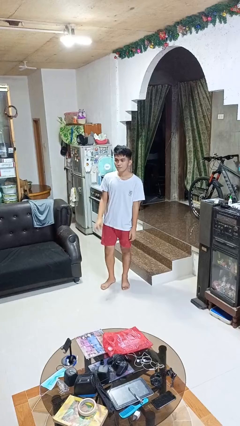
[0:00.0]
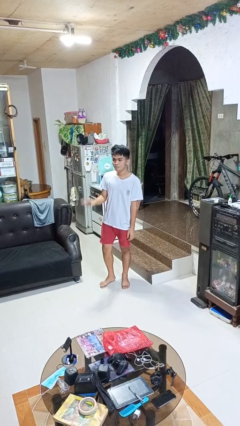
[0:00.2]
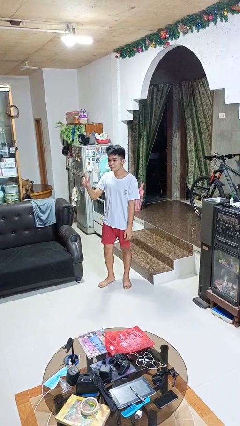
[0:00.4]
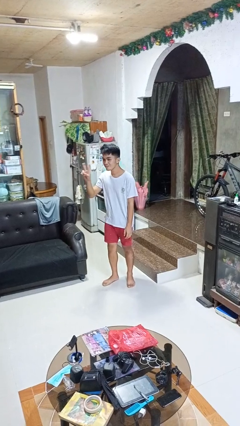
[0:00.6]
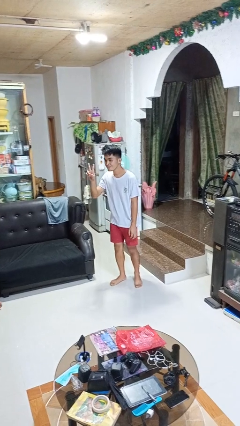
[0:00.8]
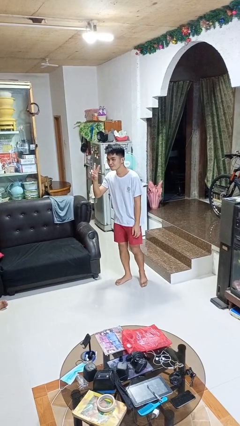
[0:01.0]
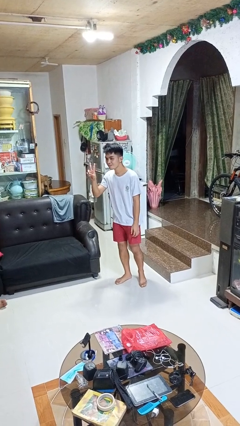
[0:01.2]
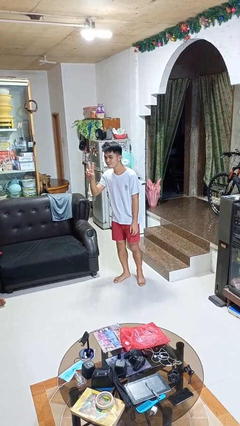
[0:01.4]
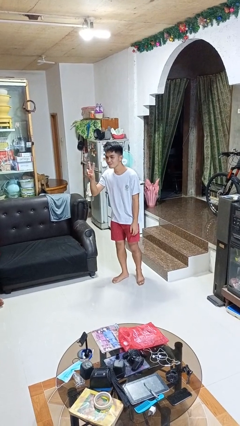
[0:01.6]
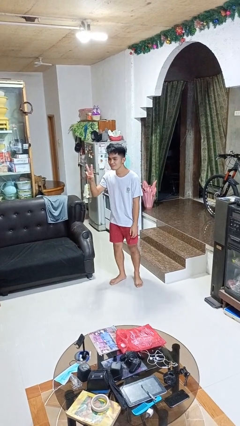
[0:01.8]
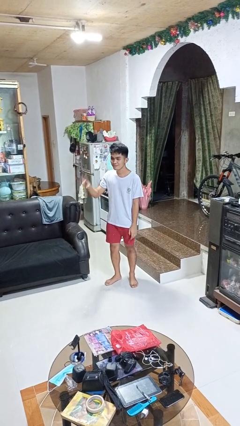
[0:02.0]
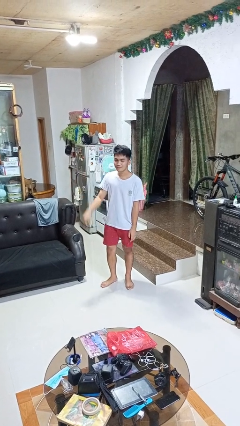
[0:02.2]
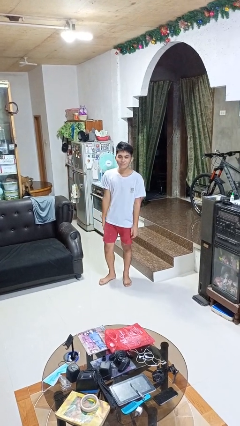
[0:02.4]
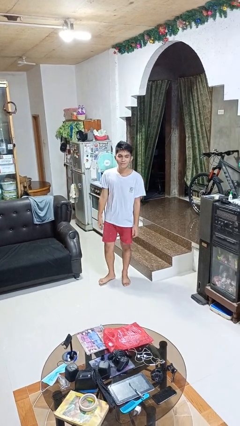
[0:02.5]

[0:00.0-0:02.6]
person gestures peace

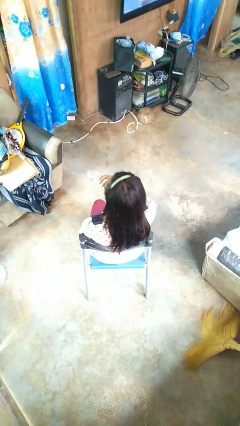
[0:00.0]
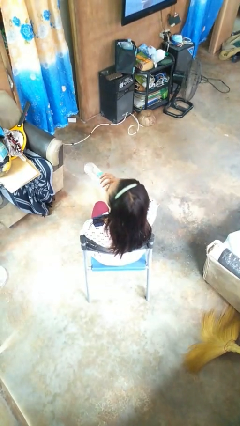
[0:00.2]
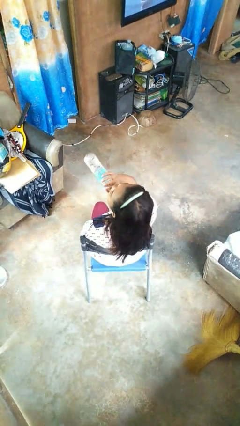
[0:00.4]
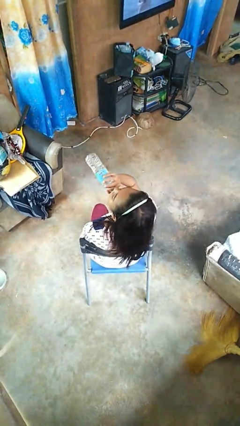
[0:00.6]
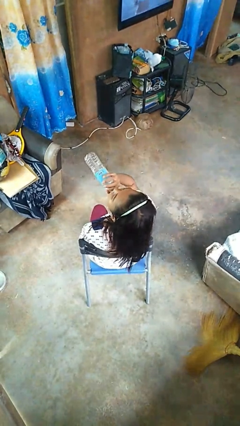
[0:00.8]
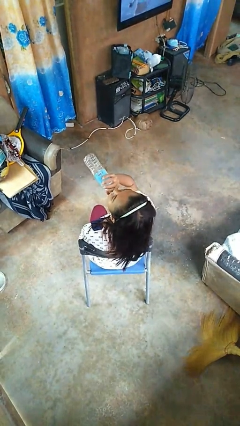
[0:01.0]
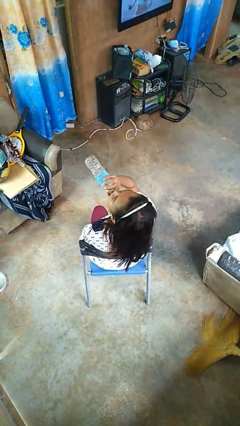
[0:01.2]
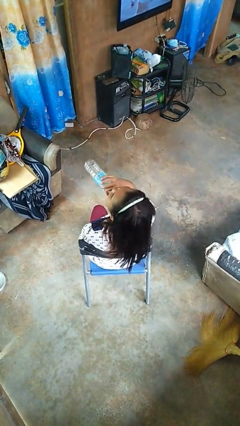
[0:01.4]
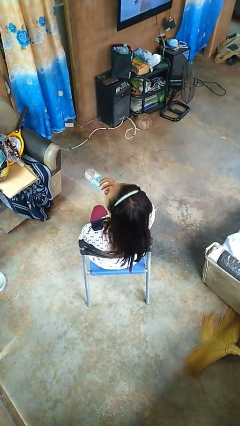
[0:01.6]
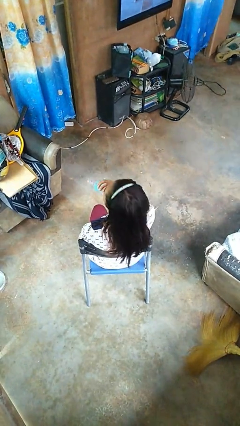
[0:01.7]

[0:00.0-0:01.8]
person drinks from bottle

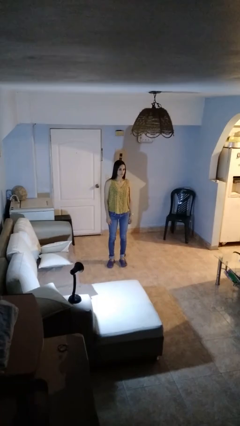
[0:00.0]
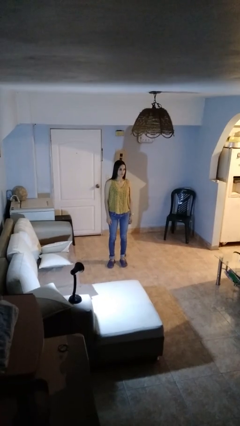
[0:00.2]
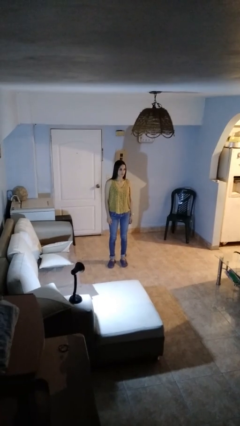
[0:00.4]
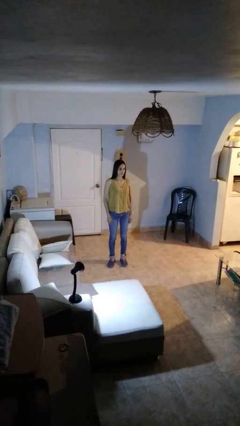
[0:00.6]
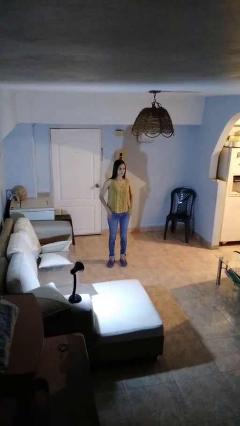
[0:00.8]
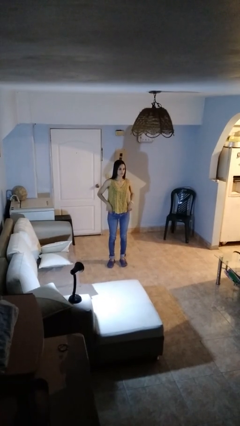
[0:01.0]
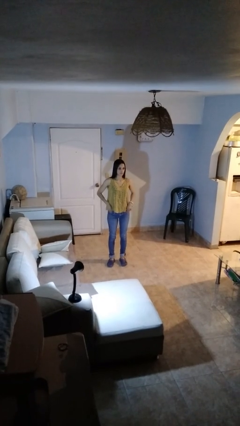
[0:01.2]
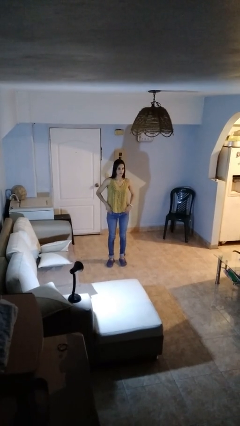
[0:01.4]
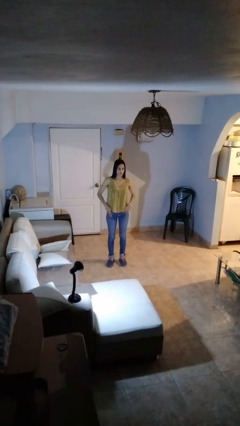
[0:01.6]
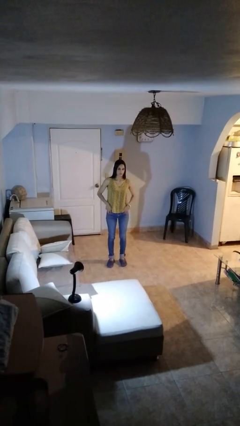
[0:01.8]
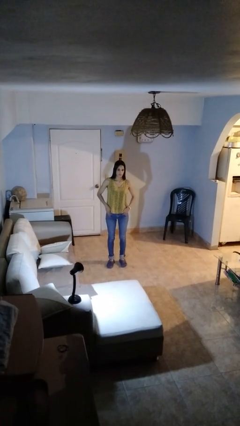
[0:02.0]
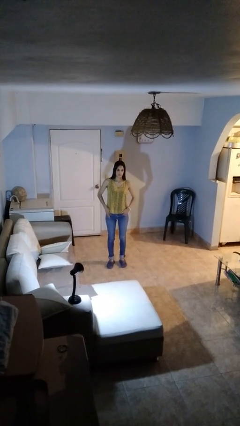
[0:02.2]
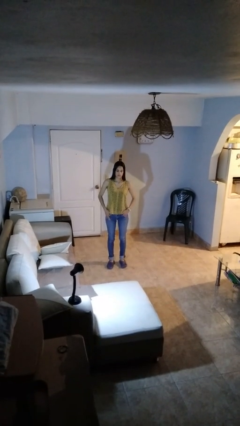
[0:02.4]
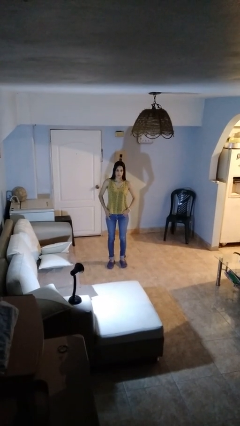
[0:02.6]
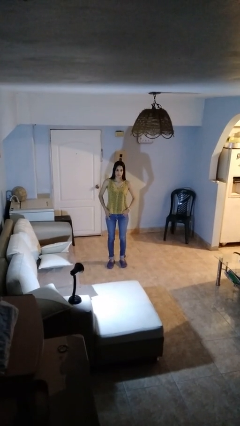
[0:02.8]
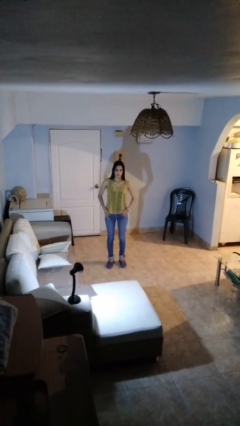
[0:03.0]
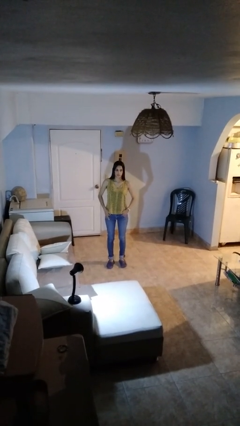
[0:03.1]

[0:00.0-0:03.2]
person puts hands in back pockets

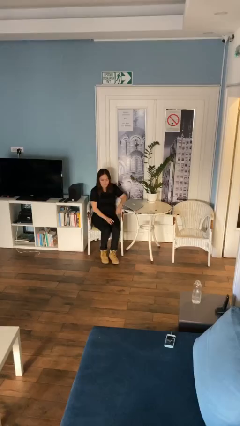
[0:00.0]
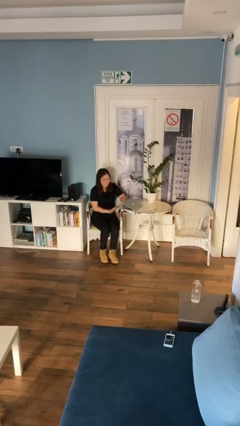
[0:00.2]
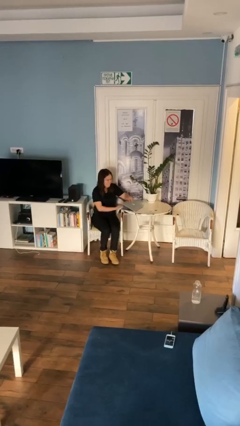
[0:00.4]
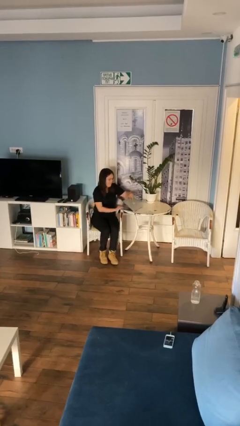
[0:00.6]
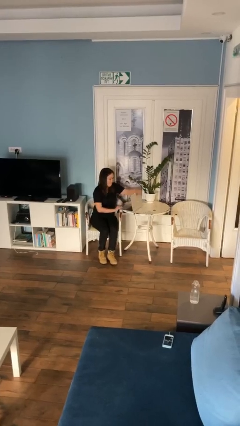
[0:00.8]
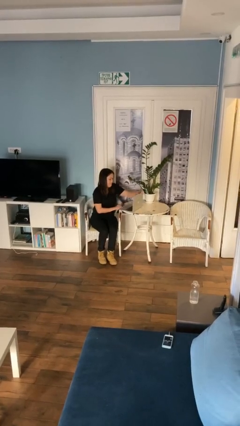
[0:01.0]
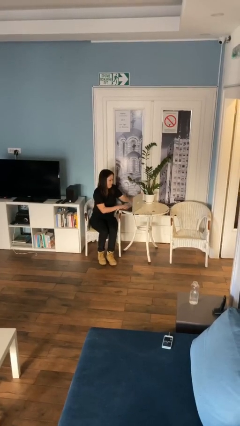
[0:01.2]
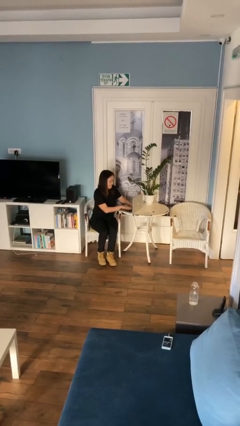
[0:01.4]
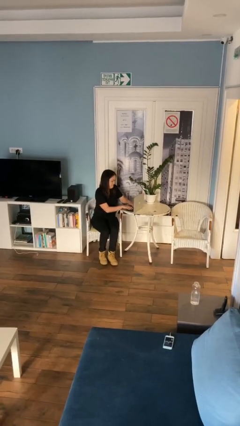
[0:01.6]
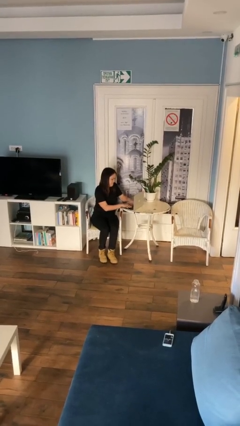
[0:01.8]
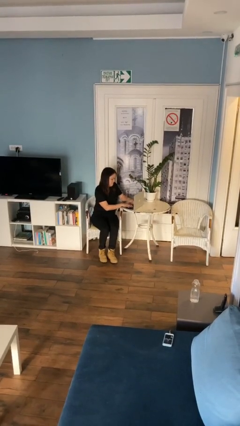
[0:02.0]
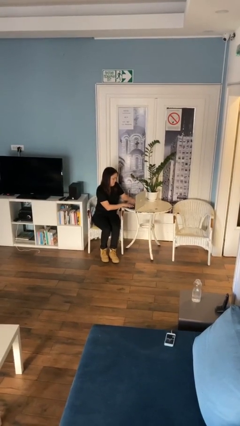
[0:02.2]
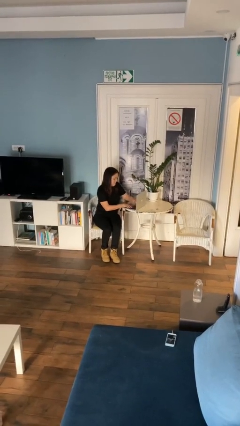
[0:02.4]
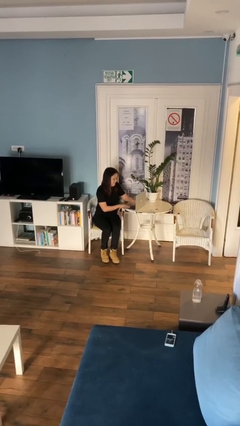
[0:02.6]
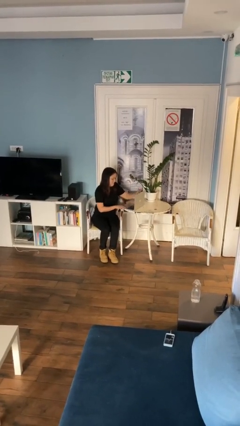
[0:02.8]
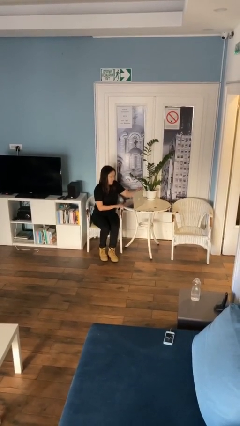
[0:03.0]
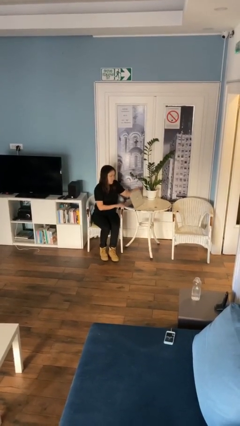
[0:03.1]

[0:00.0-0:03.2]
person interacts with laptop

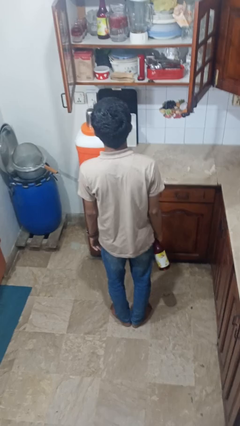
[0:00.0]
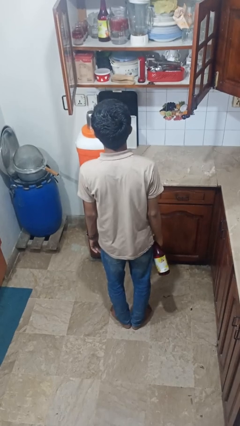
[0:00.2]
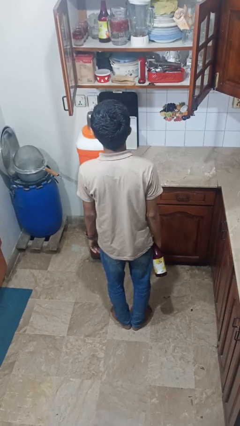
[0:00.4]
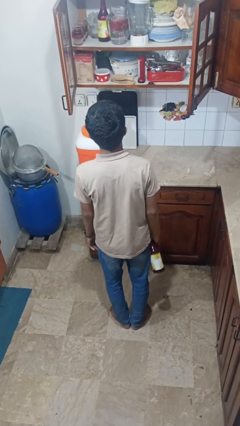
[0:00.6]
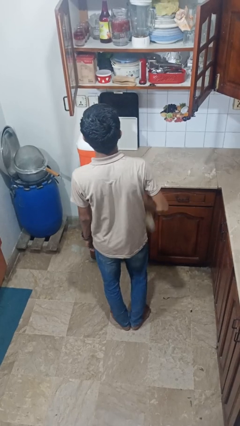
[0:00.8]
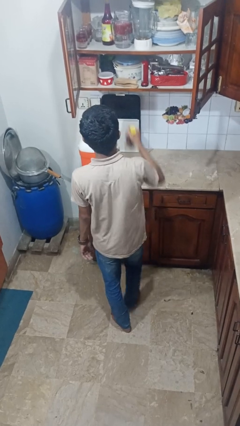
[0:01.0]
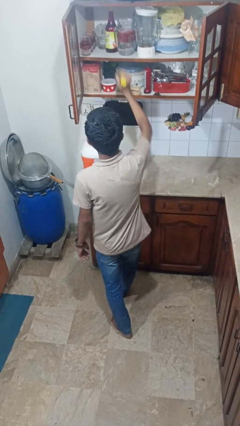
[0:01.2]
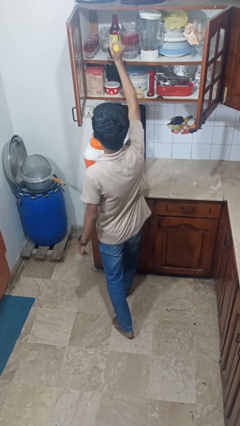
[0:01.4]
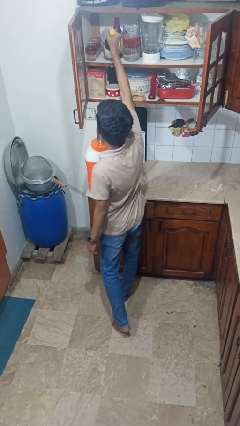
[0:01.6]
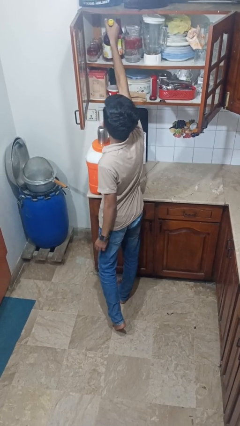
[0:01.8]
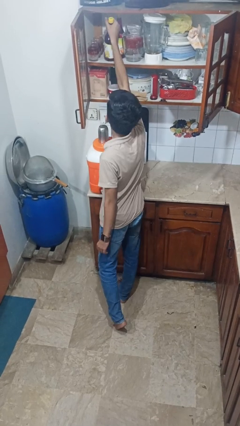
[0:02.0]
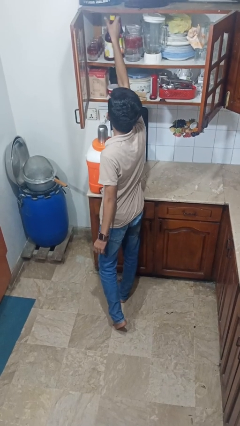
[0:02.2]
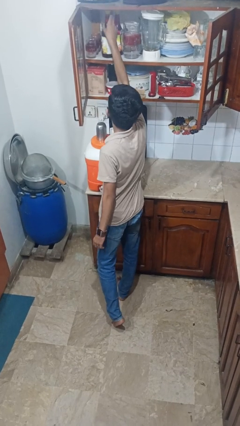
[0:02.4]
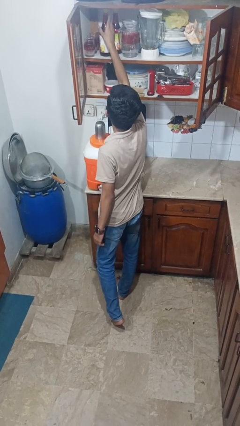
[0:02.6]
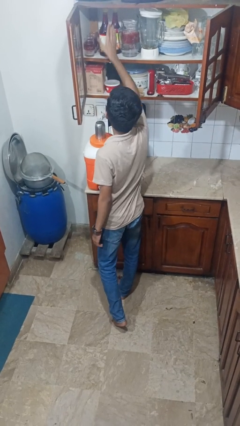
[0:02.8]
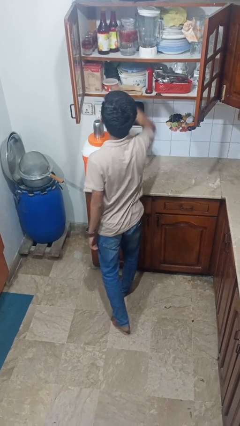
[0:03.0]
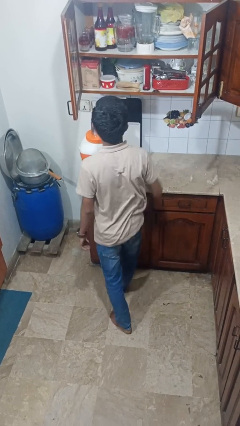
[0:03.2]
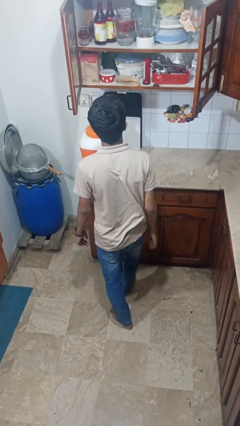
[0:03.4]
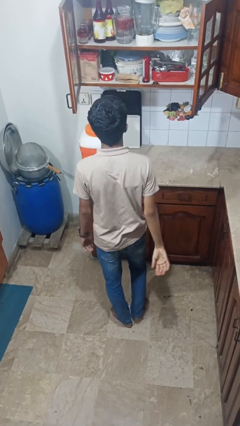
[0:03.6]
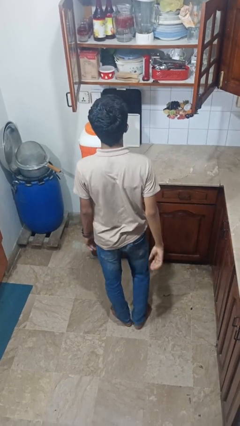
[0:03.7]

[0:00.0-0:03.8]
person puts down object into cabinet

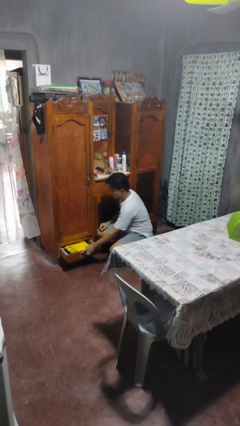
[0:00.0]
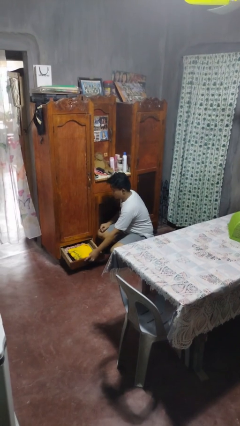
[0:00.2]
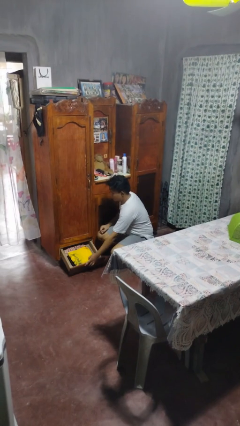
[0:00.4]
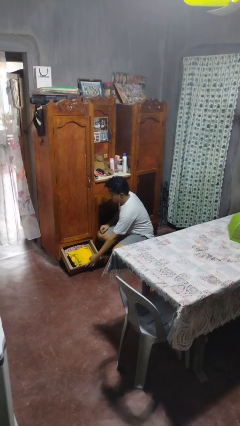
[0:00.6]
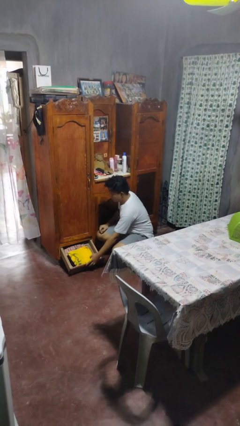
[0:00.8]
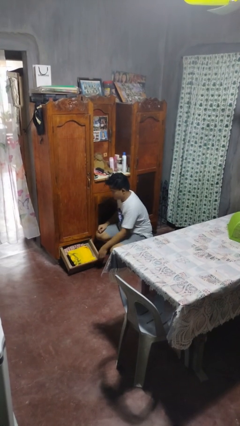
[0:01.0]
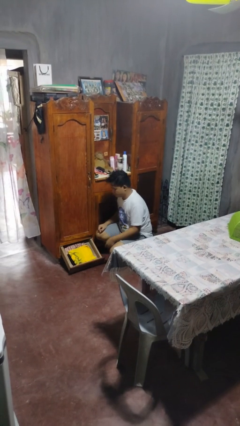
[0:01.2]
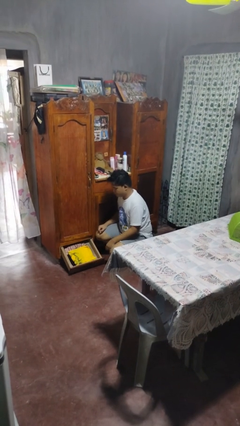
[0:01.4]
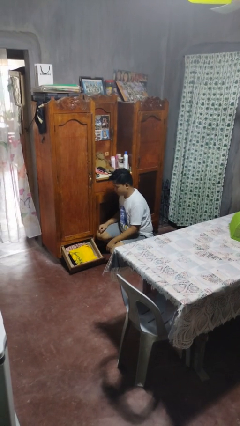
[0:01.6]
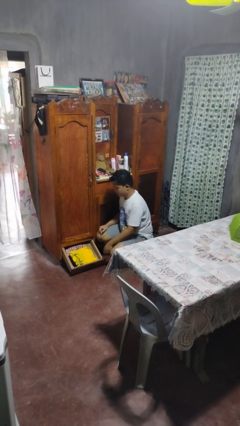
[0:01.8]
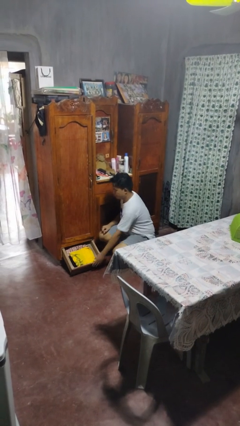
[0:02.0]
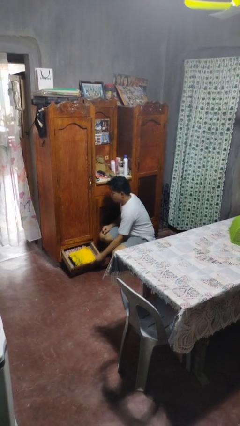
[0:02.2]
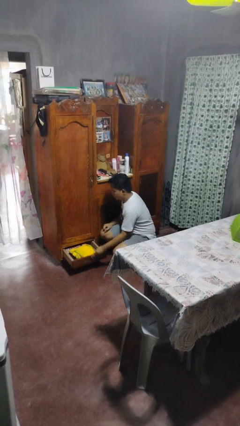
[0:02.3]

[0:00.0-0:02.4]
person opens dresser drawer

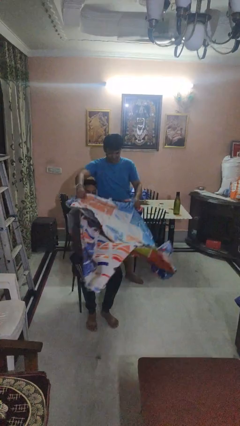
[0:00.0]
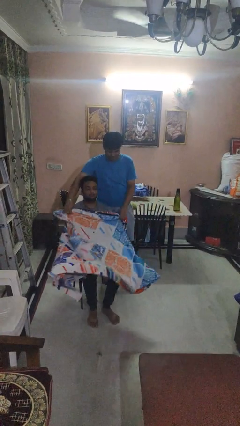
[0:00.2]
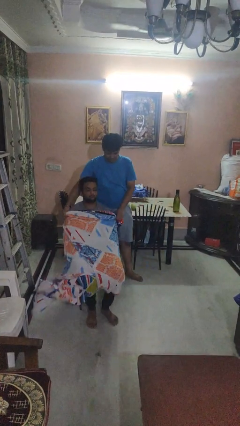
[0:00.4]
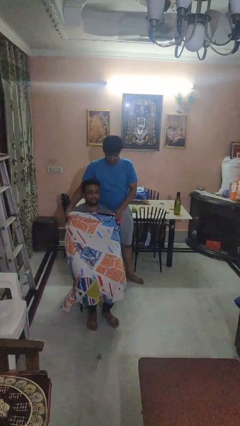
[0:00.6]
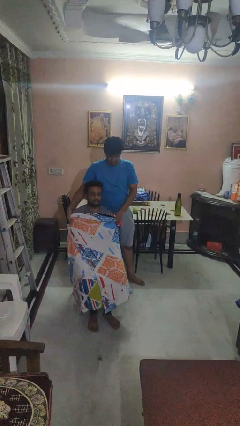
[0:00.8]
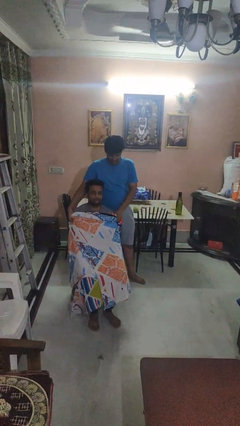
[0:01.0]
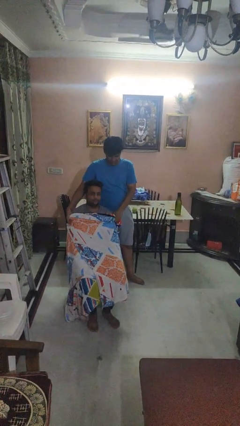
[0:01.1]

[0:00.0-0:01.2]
person covers friend with blanket
